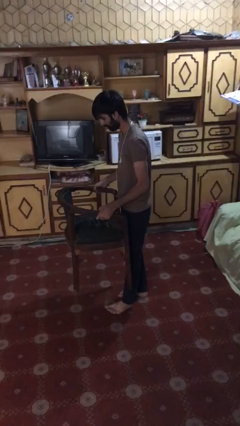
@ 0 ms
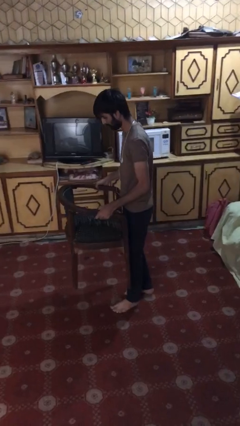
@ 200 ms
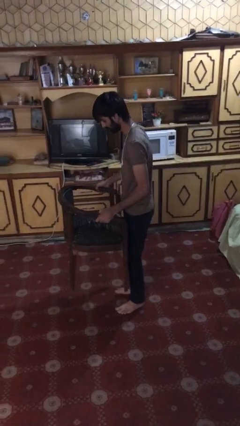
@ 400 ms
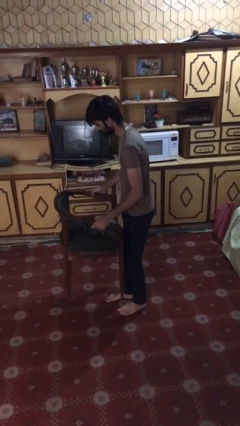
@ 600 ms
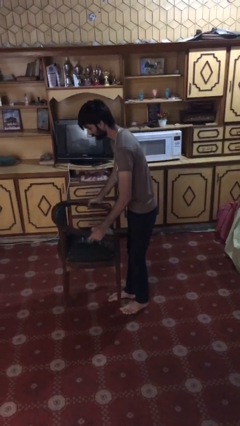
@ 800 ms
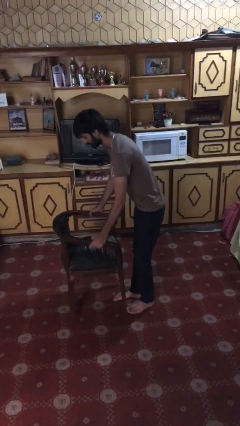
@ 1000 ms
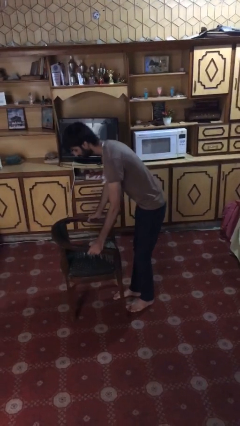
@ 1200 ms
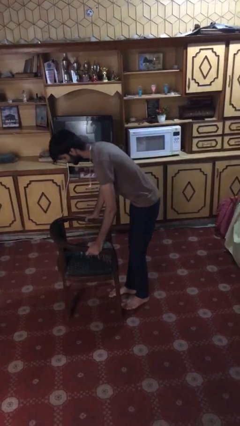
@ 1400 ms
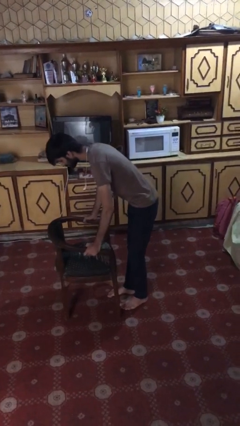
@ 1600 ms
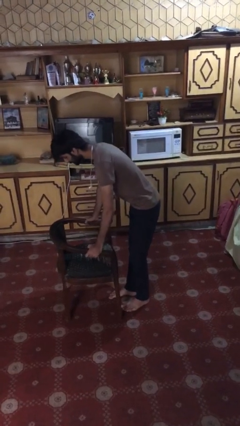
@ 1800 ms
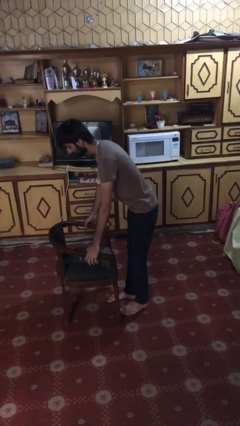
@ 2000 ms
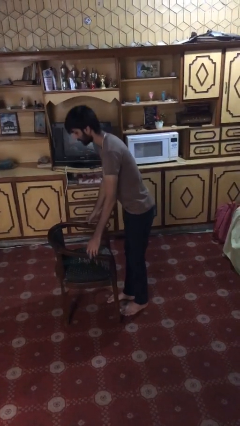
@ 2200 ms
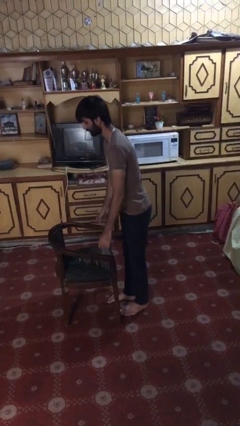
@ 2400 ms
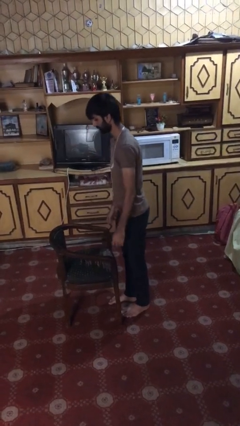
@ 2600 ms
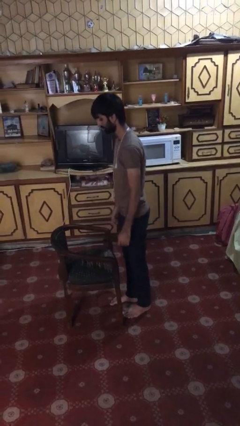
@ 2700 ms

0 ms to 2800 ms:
person puts down object on floor

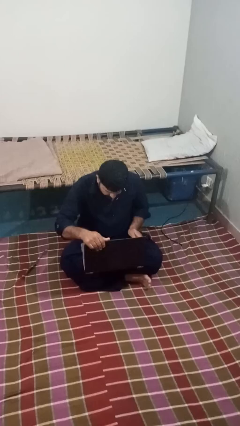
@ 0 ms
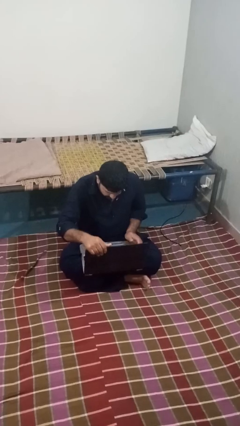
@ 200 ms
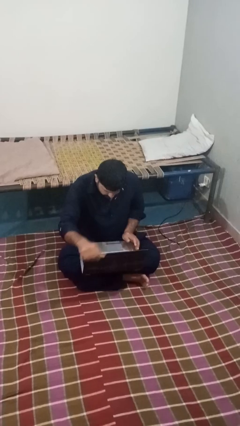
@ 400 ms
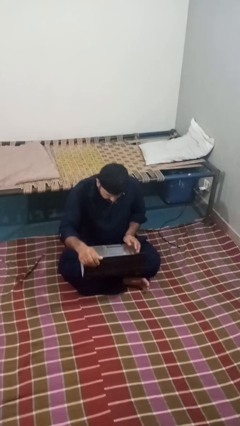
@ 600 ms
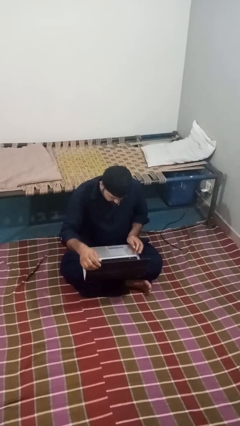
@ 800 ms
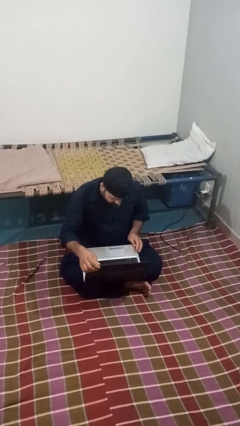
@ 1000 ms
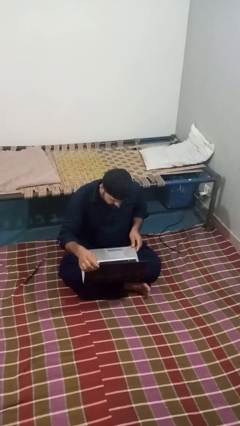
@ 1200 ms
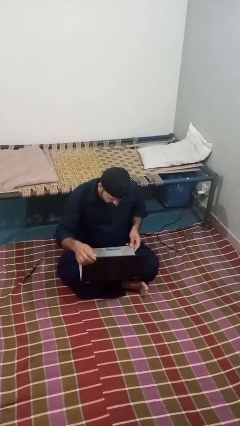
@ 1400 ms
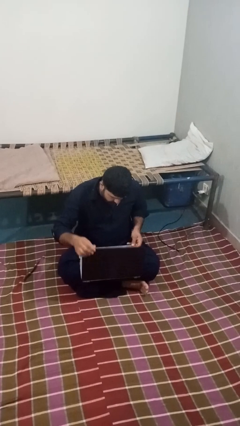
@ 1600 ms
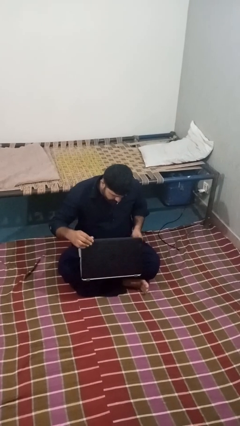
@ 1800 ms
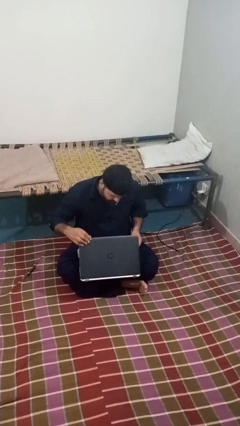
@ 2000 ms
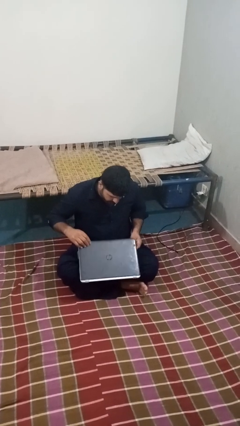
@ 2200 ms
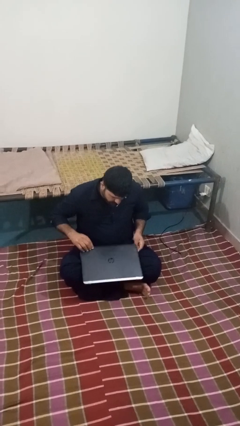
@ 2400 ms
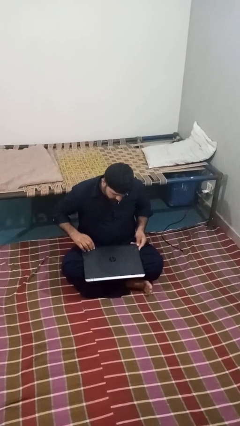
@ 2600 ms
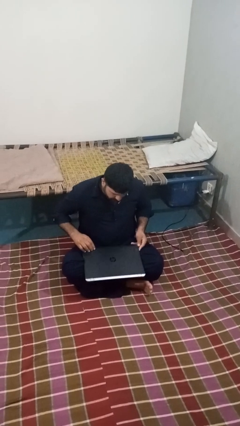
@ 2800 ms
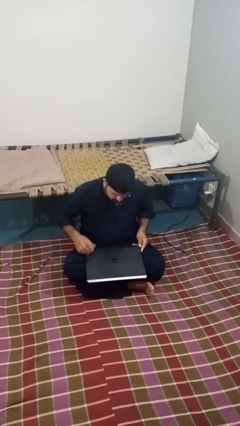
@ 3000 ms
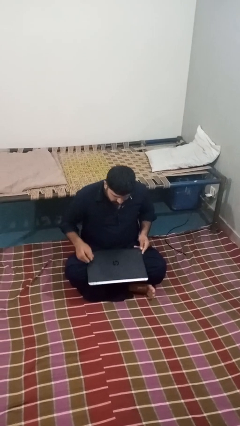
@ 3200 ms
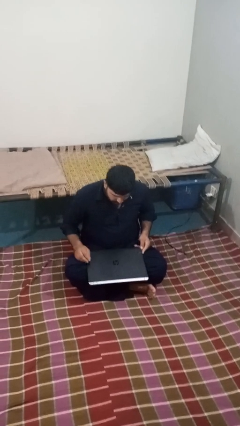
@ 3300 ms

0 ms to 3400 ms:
person closes laptop

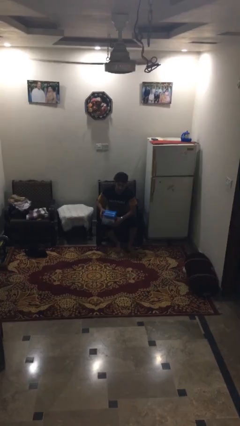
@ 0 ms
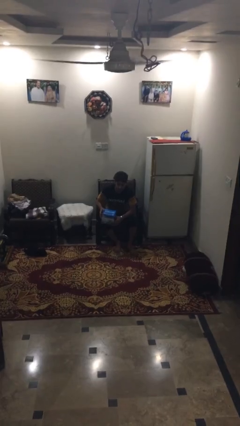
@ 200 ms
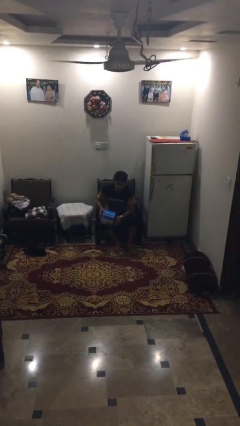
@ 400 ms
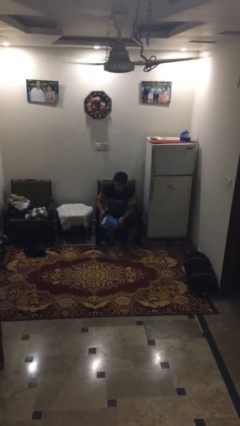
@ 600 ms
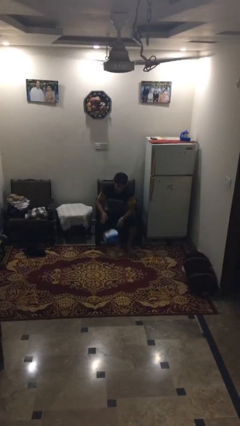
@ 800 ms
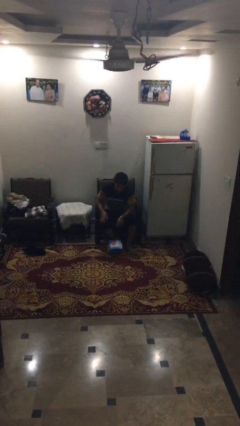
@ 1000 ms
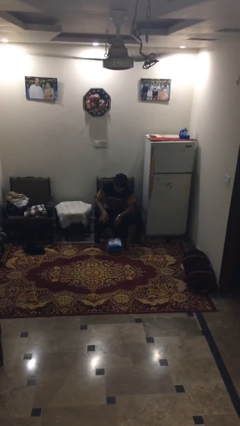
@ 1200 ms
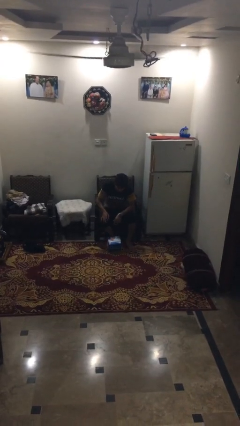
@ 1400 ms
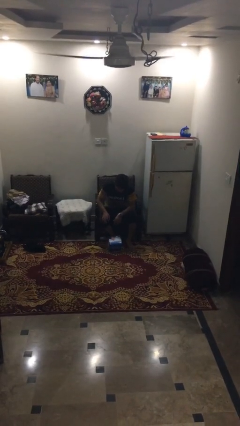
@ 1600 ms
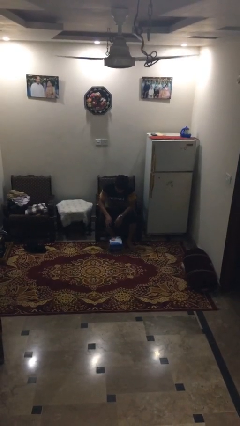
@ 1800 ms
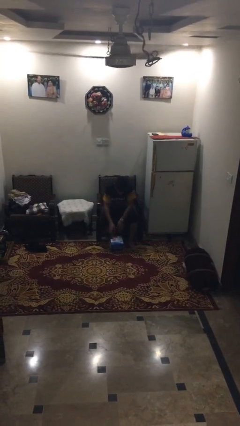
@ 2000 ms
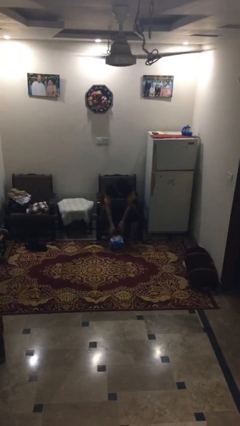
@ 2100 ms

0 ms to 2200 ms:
person drops object

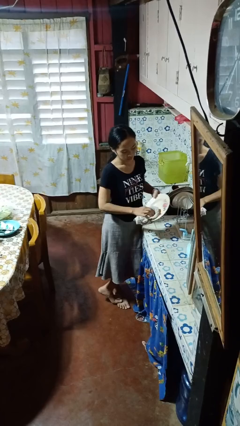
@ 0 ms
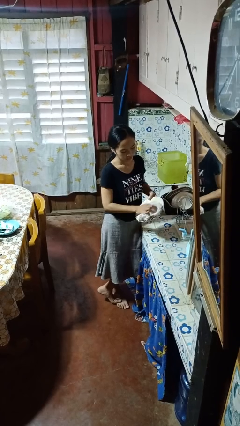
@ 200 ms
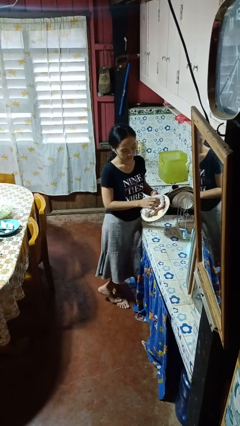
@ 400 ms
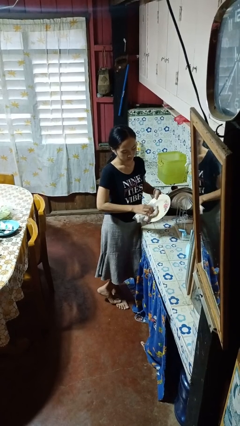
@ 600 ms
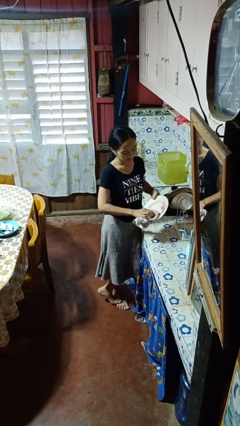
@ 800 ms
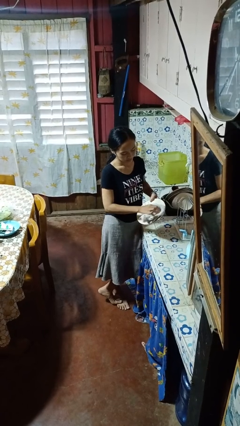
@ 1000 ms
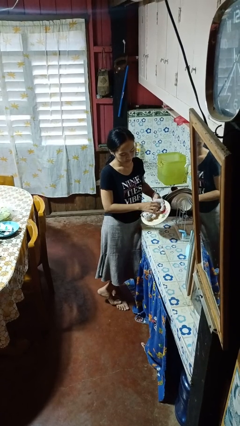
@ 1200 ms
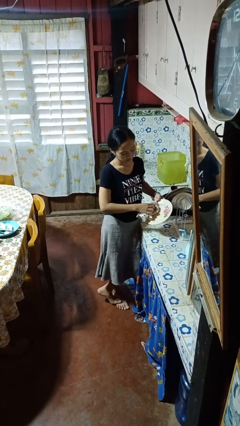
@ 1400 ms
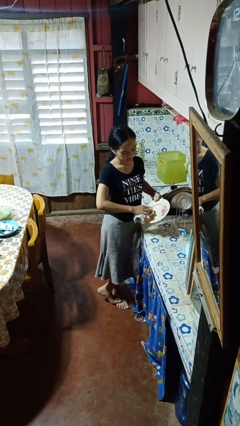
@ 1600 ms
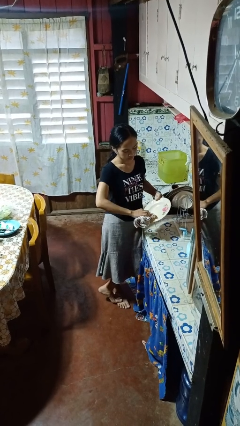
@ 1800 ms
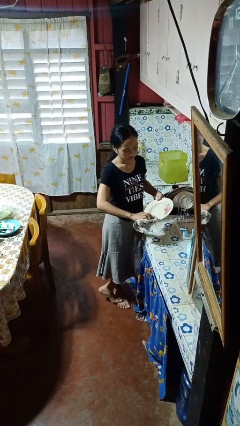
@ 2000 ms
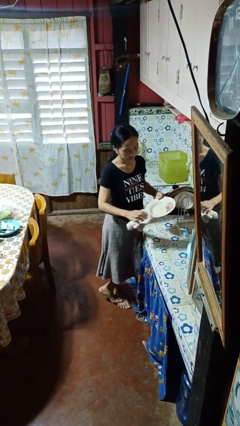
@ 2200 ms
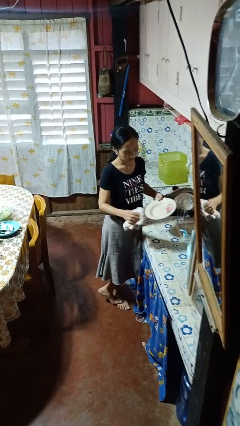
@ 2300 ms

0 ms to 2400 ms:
person dries dish

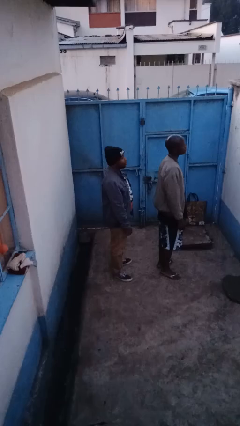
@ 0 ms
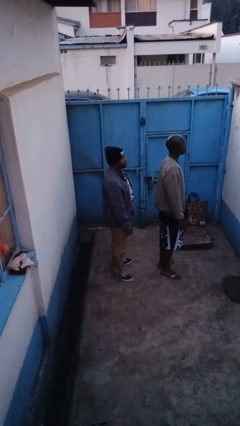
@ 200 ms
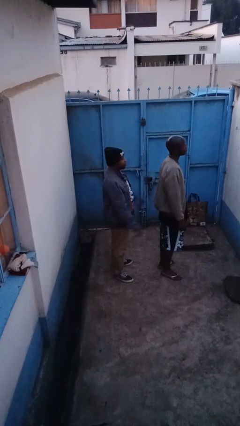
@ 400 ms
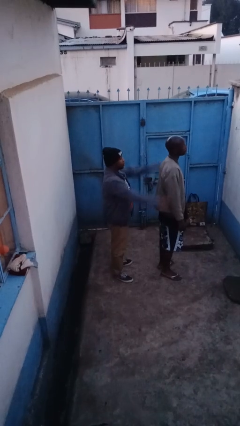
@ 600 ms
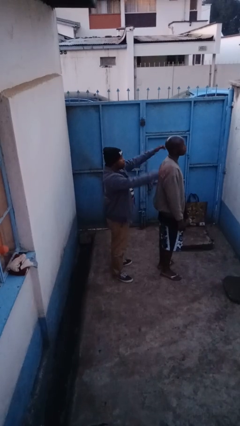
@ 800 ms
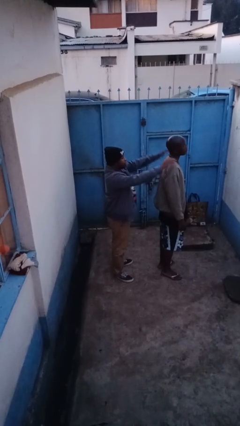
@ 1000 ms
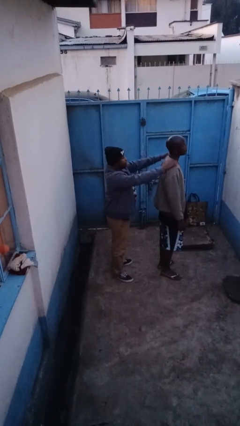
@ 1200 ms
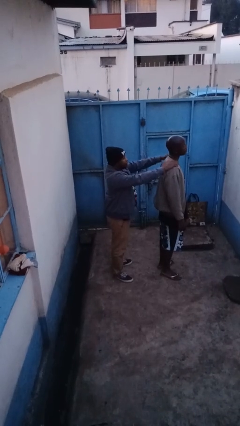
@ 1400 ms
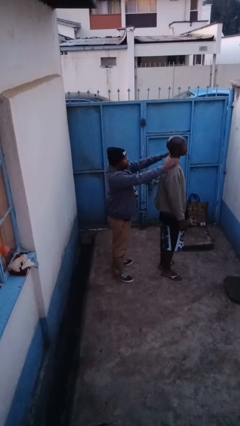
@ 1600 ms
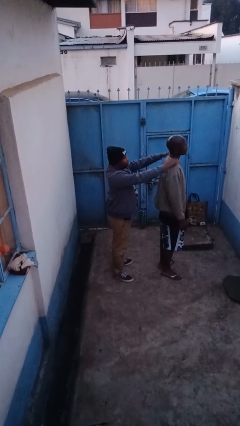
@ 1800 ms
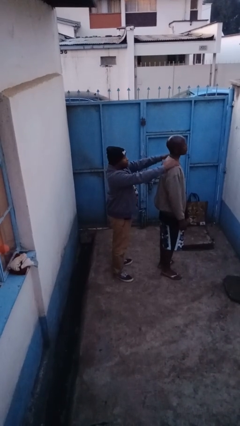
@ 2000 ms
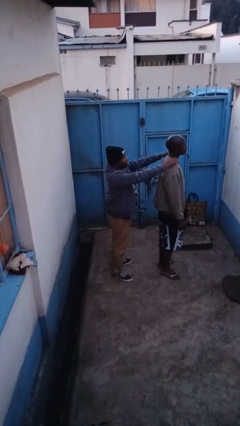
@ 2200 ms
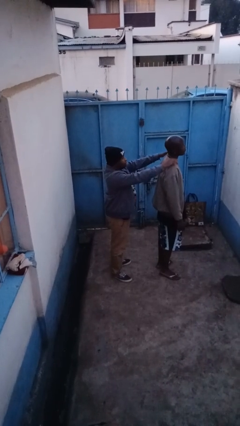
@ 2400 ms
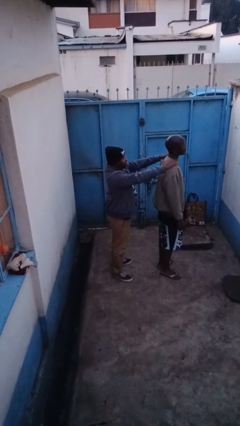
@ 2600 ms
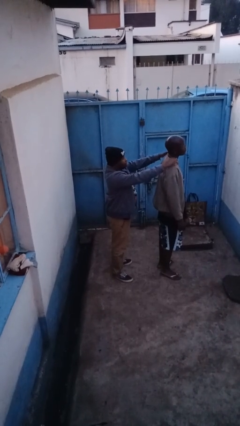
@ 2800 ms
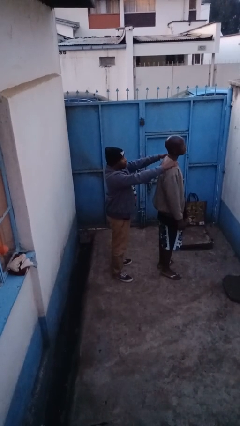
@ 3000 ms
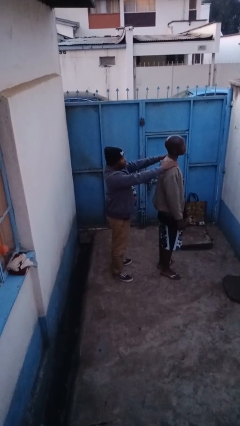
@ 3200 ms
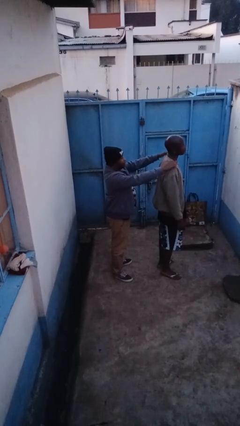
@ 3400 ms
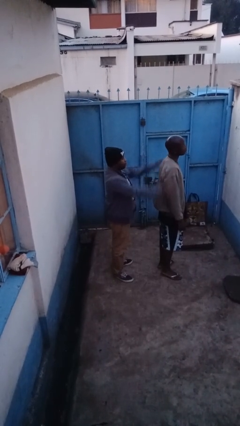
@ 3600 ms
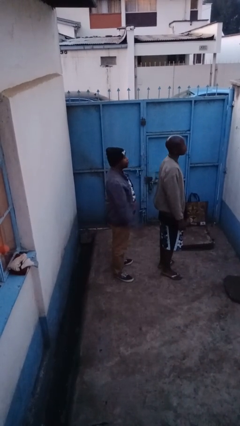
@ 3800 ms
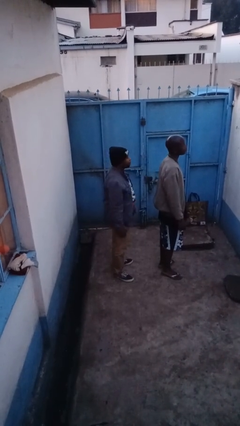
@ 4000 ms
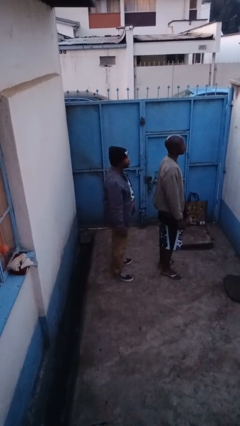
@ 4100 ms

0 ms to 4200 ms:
person pounds shoulders of person

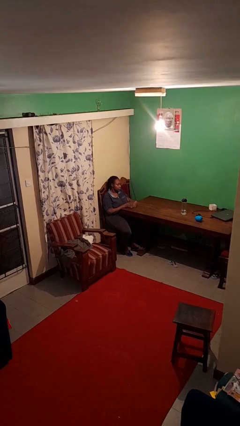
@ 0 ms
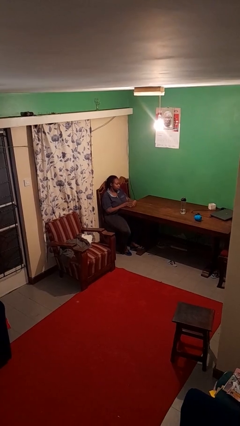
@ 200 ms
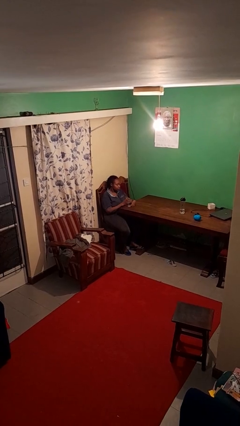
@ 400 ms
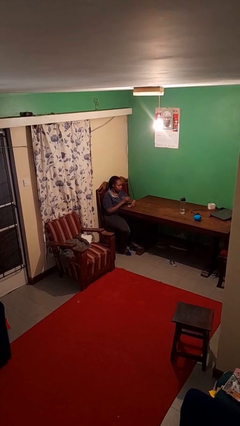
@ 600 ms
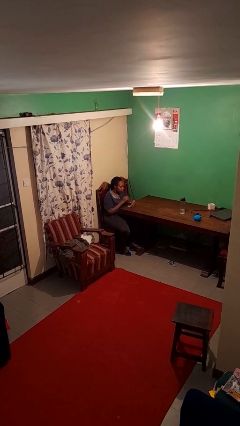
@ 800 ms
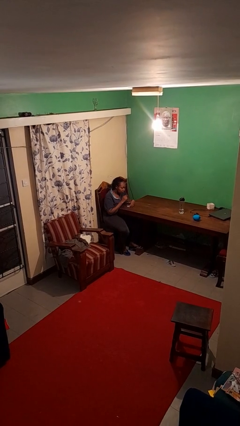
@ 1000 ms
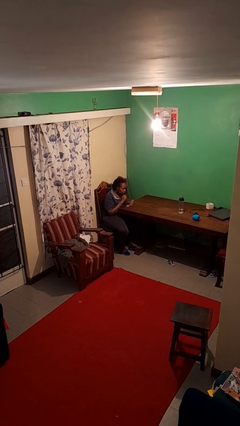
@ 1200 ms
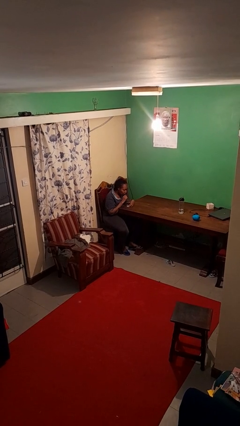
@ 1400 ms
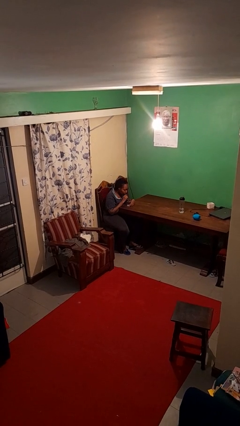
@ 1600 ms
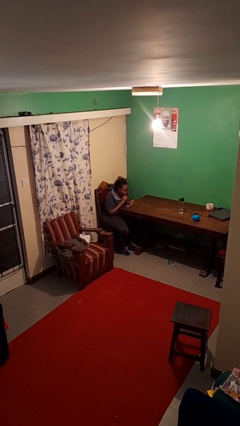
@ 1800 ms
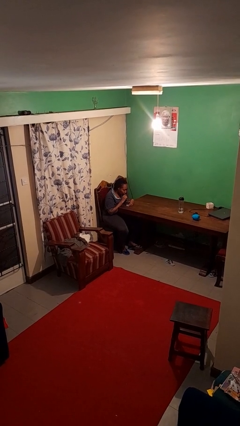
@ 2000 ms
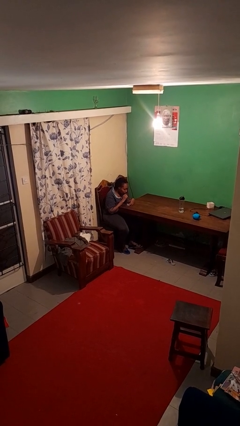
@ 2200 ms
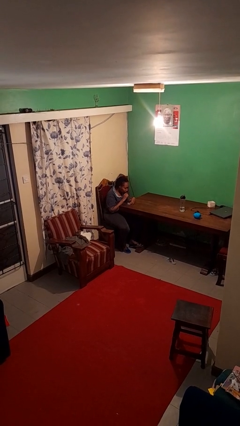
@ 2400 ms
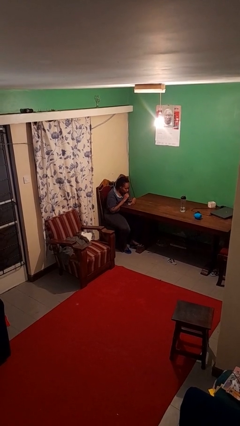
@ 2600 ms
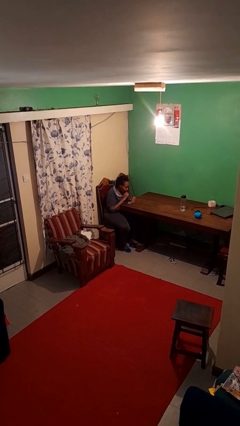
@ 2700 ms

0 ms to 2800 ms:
person drinks from straw
